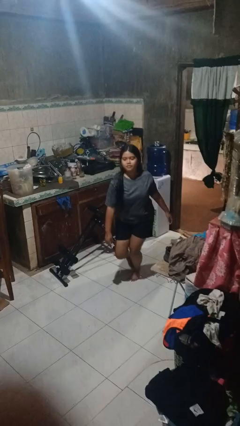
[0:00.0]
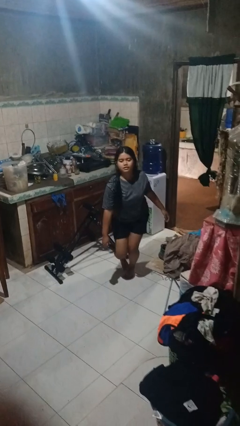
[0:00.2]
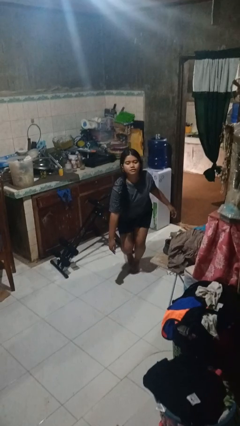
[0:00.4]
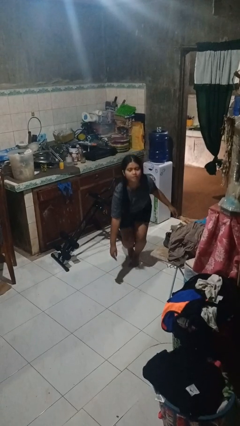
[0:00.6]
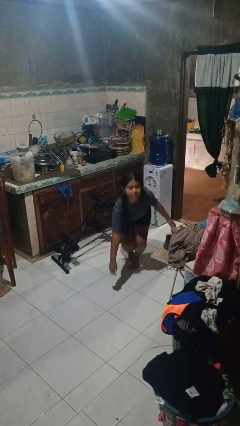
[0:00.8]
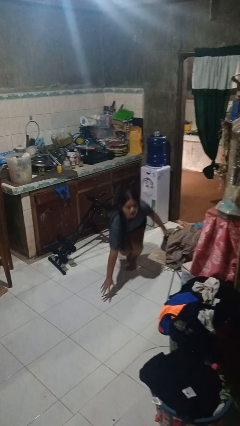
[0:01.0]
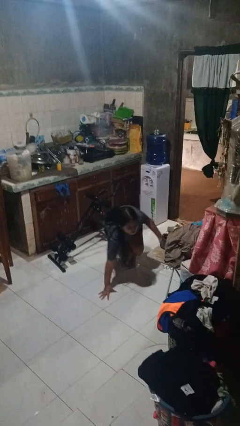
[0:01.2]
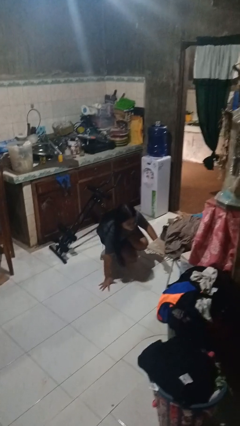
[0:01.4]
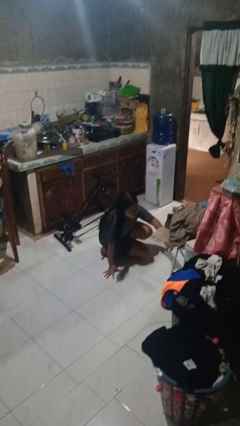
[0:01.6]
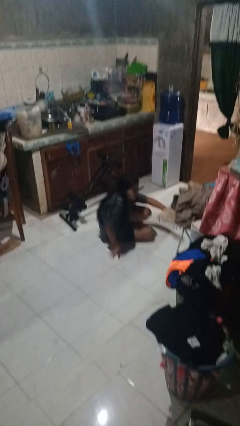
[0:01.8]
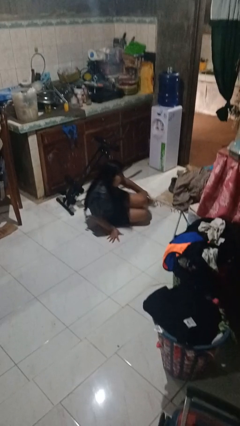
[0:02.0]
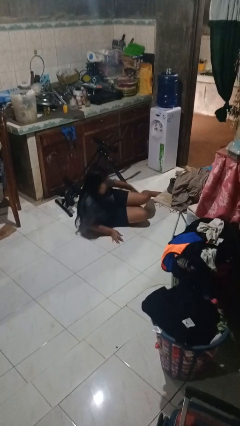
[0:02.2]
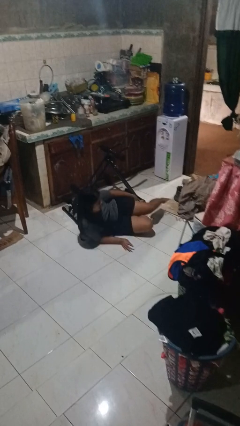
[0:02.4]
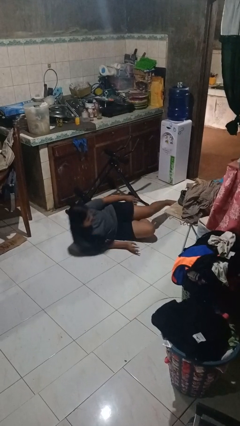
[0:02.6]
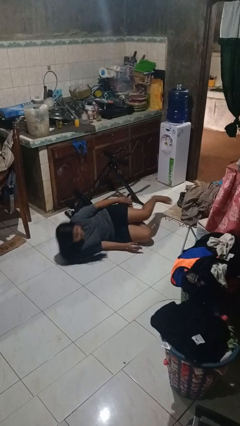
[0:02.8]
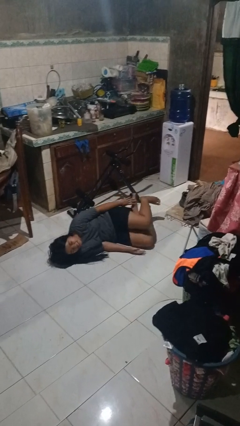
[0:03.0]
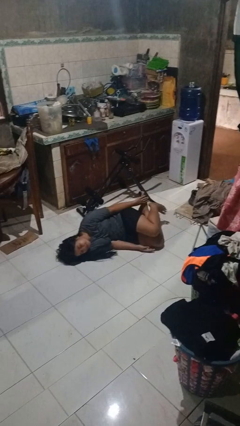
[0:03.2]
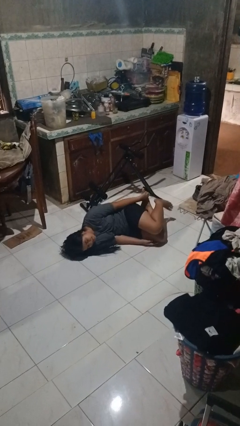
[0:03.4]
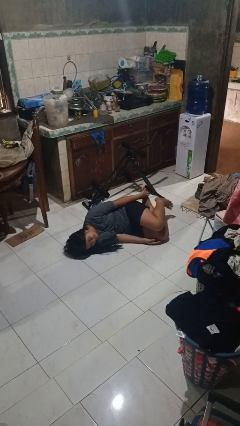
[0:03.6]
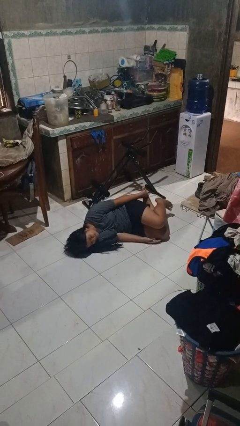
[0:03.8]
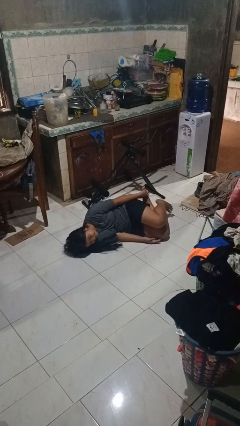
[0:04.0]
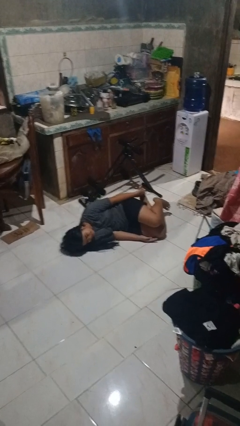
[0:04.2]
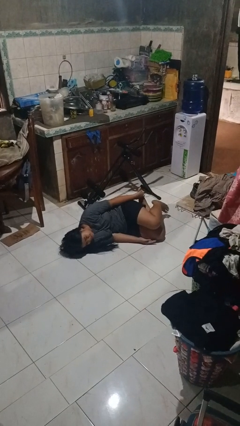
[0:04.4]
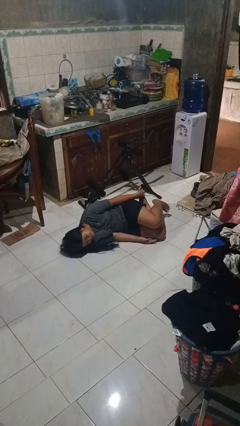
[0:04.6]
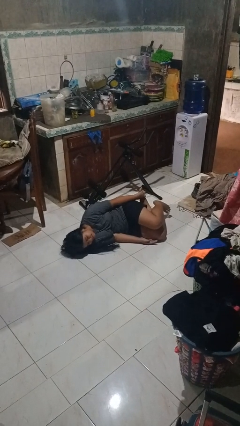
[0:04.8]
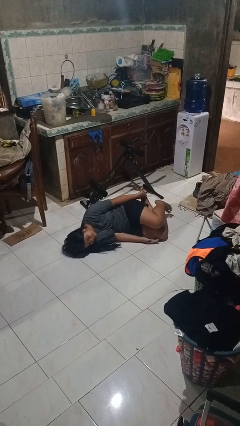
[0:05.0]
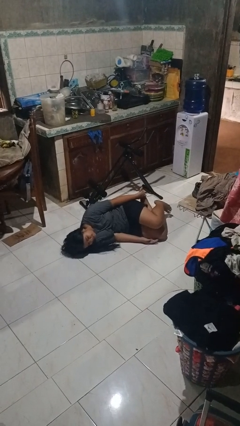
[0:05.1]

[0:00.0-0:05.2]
person lies down on floor

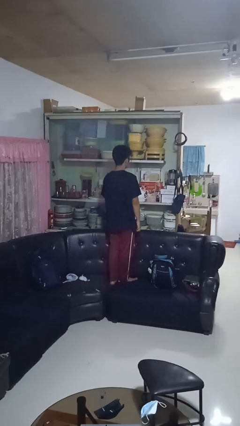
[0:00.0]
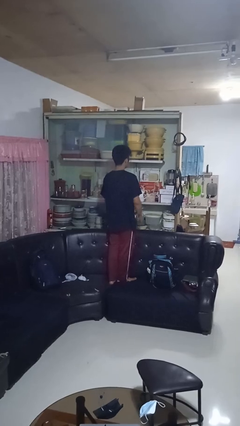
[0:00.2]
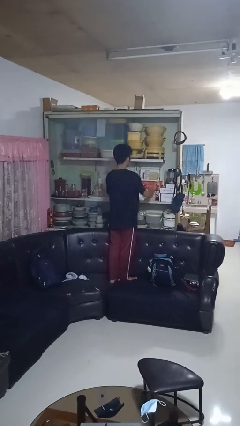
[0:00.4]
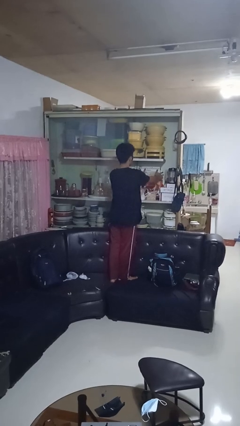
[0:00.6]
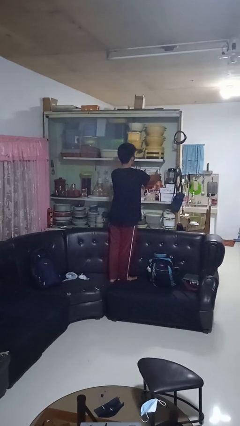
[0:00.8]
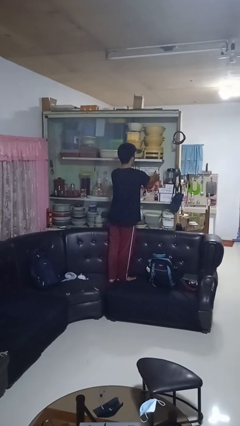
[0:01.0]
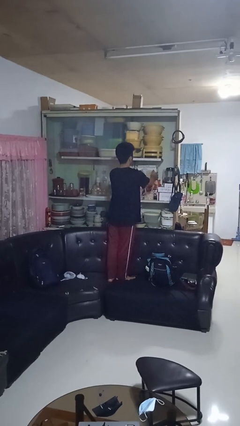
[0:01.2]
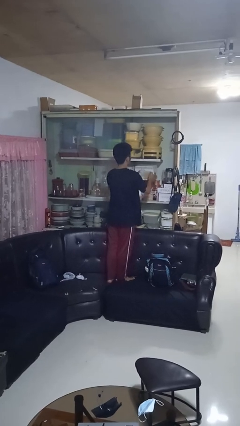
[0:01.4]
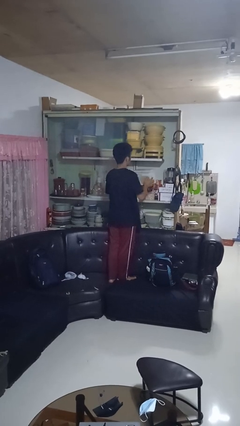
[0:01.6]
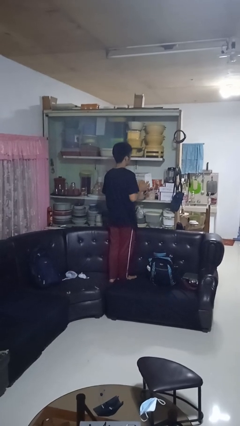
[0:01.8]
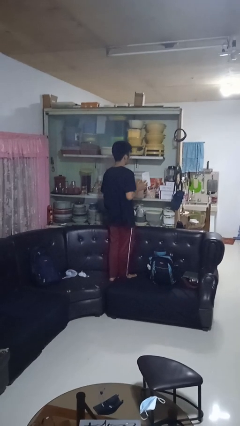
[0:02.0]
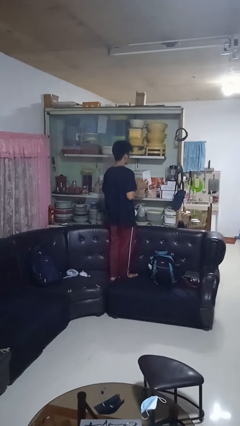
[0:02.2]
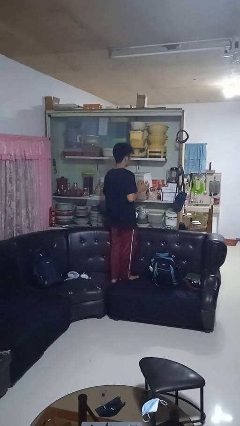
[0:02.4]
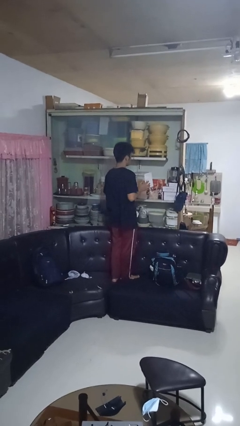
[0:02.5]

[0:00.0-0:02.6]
person picks up object from cabinet

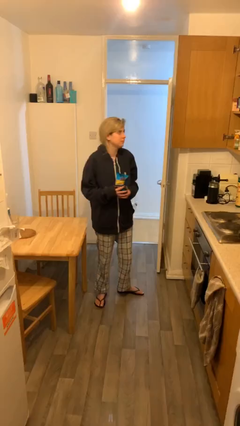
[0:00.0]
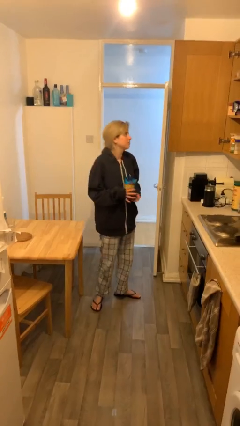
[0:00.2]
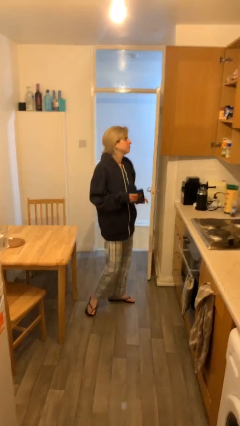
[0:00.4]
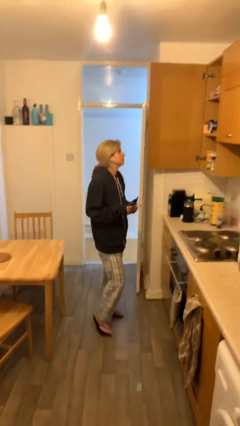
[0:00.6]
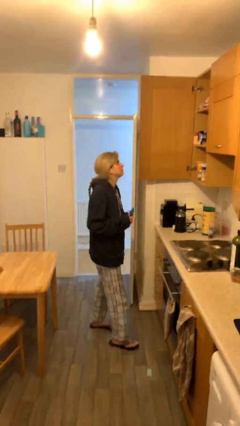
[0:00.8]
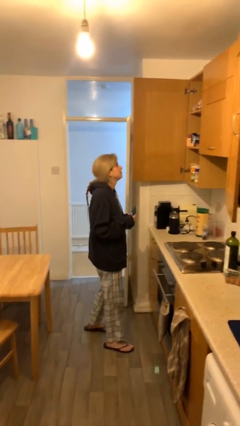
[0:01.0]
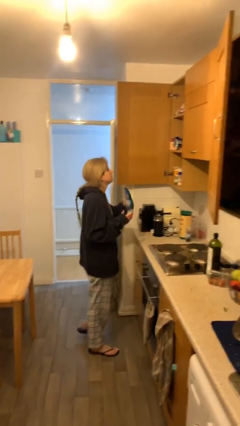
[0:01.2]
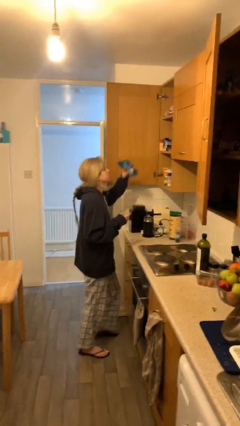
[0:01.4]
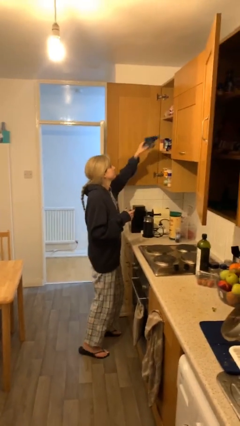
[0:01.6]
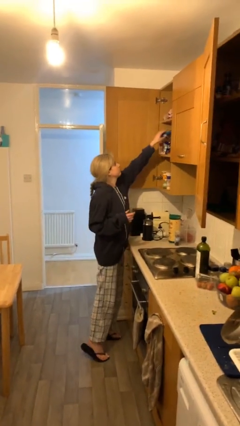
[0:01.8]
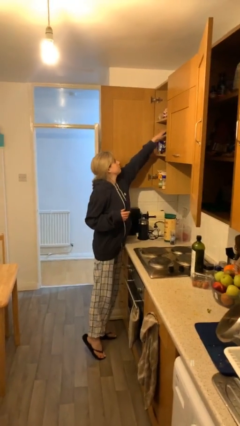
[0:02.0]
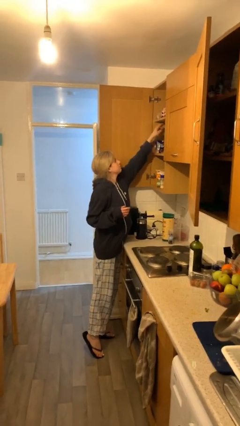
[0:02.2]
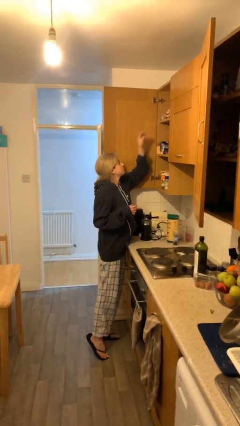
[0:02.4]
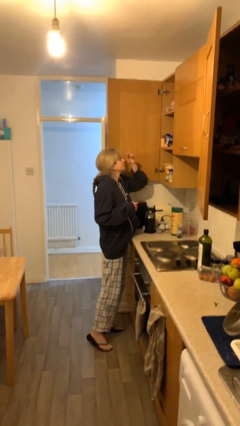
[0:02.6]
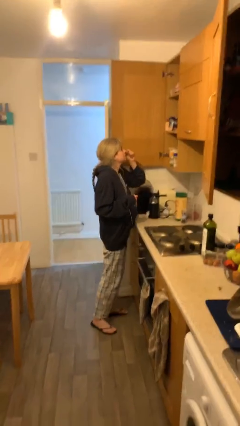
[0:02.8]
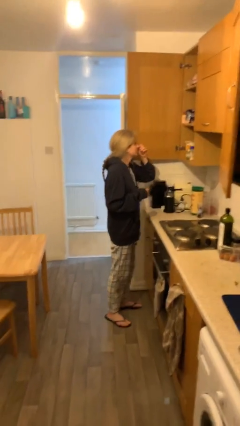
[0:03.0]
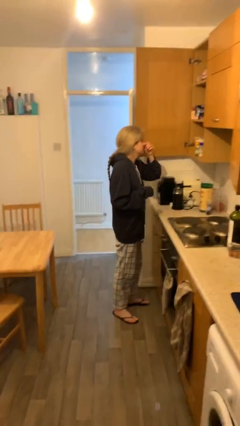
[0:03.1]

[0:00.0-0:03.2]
person puts down object on shelf

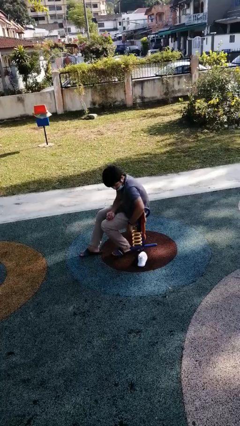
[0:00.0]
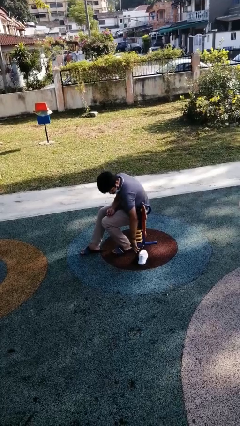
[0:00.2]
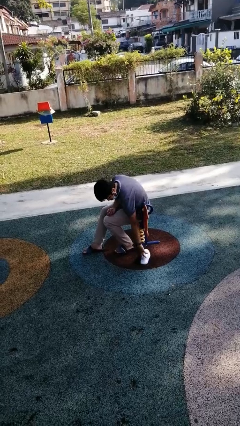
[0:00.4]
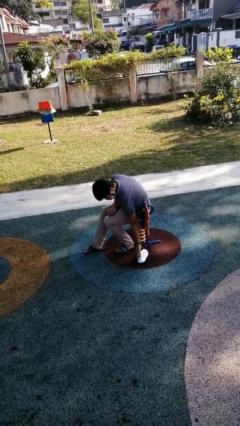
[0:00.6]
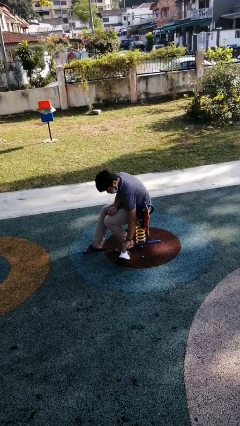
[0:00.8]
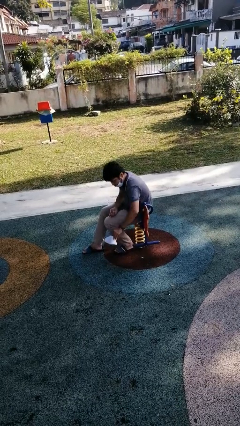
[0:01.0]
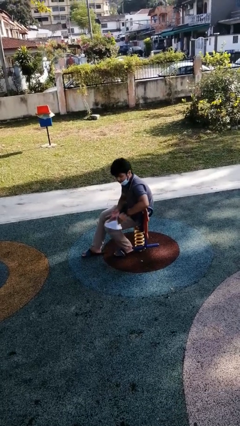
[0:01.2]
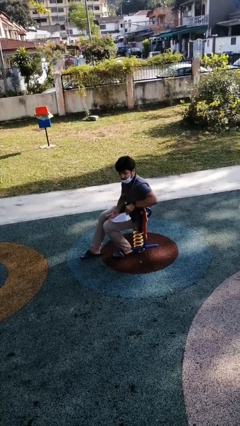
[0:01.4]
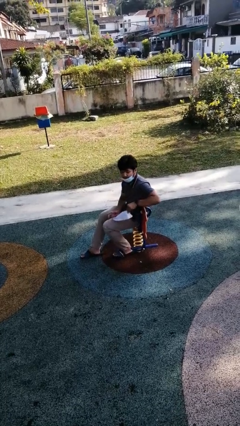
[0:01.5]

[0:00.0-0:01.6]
person picks up object from floor

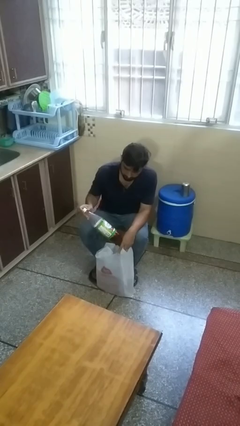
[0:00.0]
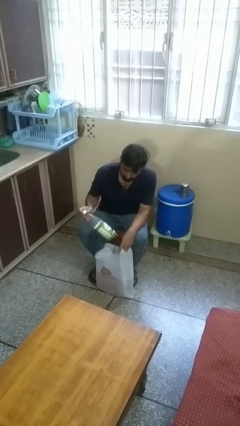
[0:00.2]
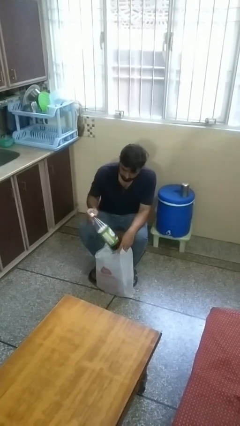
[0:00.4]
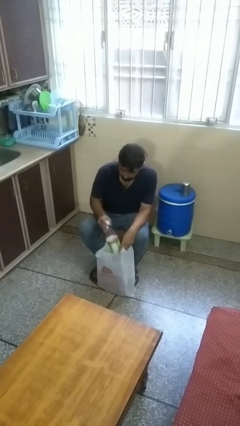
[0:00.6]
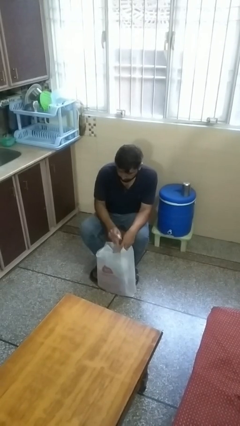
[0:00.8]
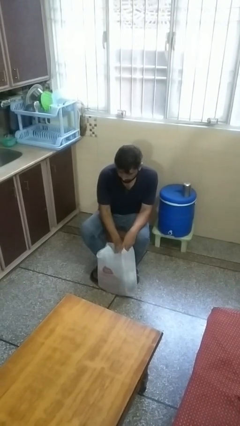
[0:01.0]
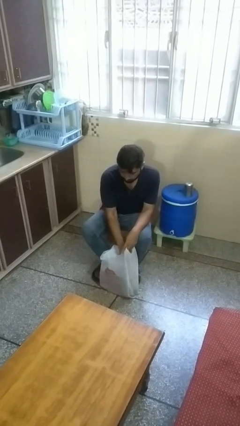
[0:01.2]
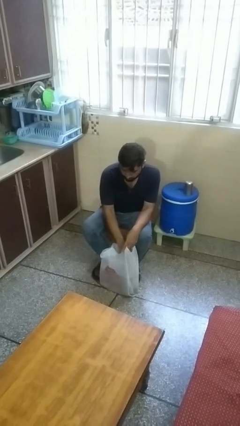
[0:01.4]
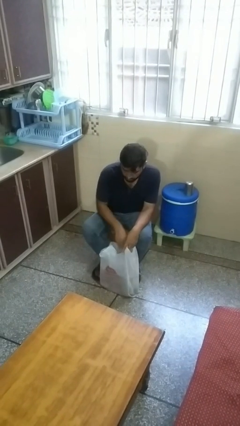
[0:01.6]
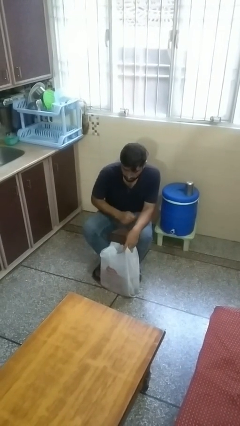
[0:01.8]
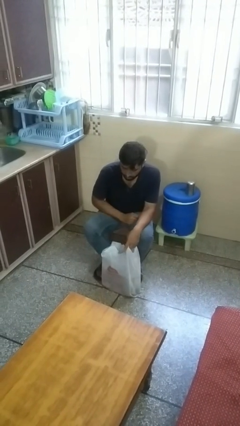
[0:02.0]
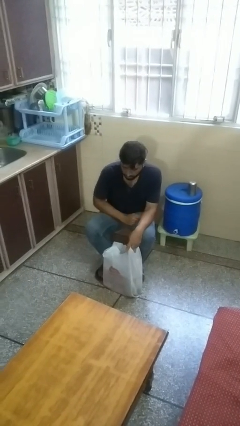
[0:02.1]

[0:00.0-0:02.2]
person puts object into bag

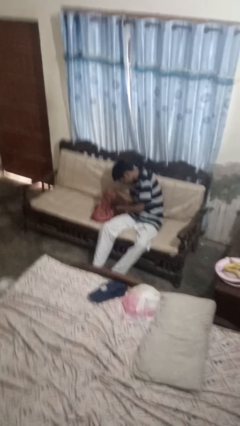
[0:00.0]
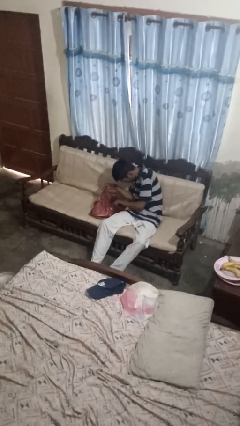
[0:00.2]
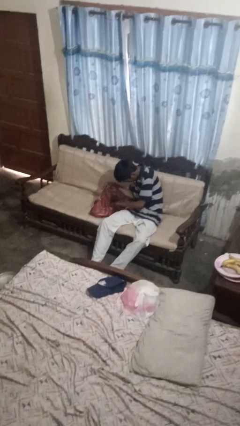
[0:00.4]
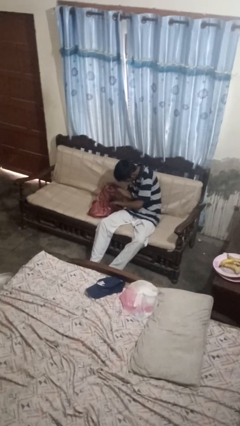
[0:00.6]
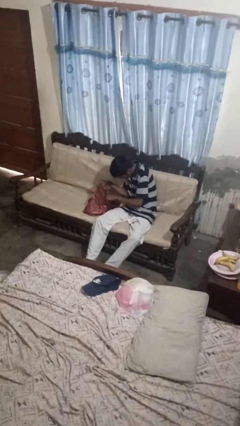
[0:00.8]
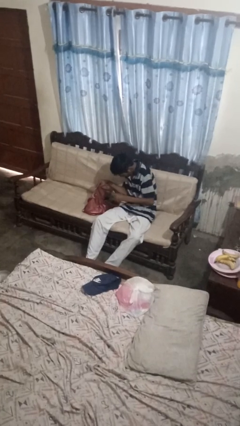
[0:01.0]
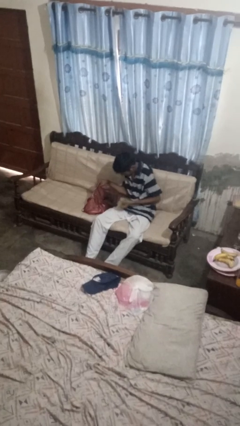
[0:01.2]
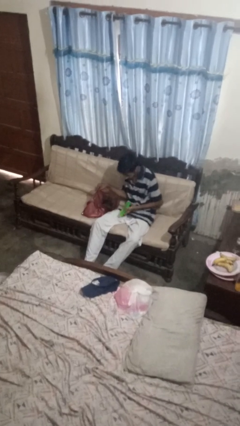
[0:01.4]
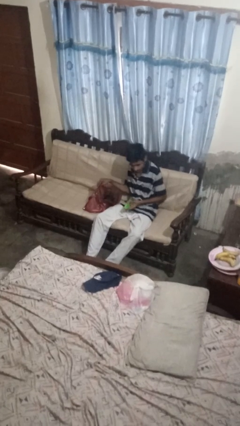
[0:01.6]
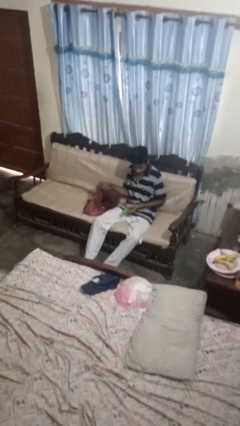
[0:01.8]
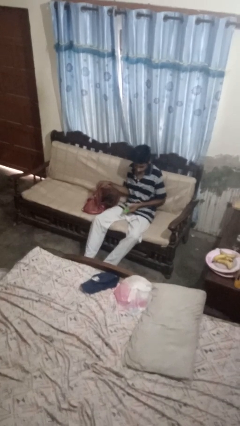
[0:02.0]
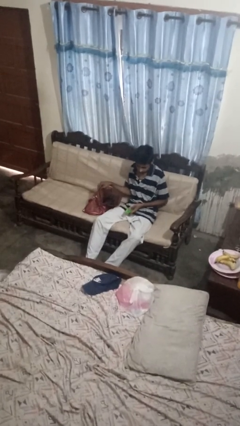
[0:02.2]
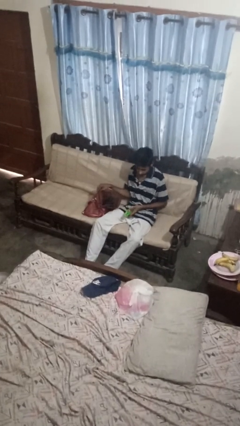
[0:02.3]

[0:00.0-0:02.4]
person takes object from purse
